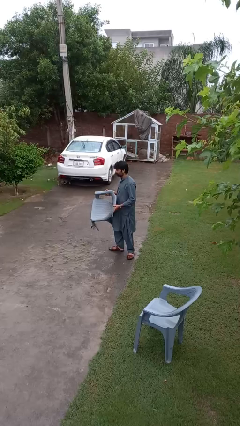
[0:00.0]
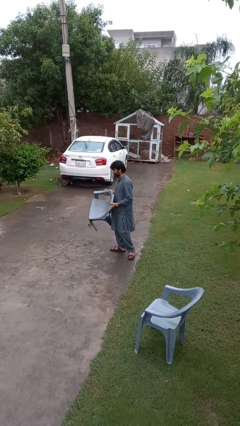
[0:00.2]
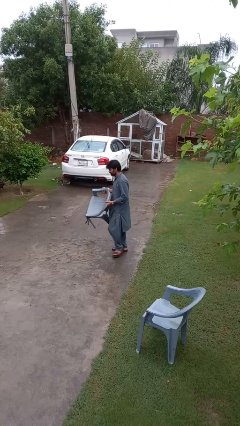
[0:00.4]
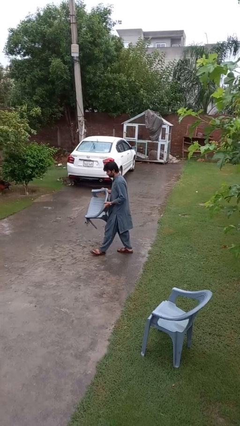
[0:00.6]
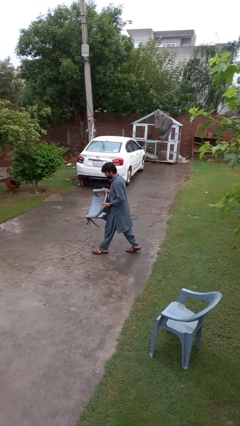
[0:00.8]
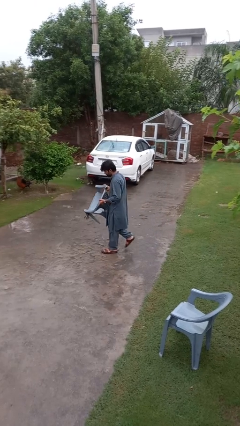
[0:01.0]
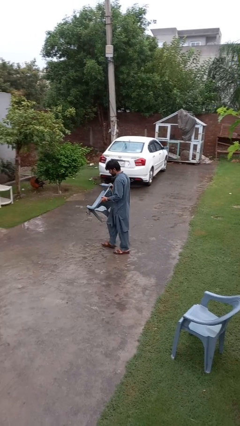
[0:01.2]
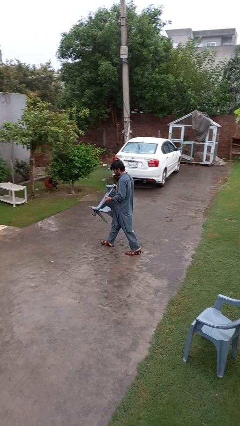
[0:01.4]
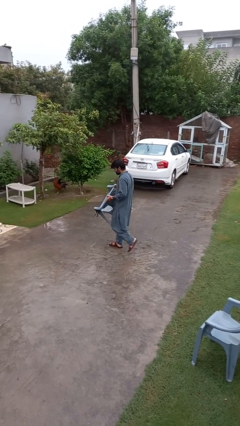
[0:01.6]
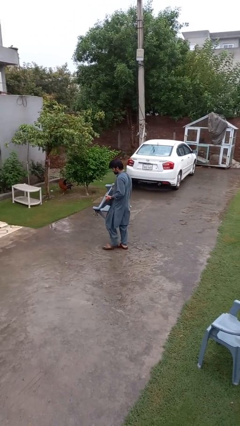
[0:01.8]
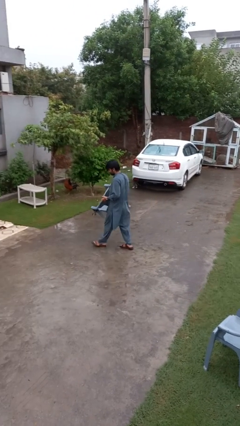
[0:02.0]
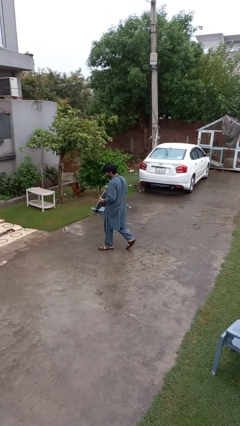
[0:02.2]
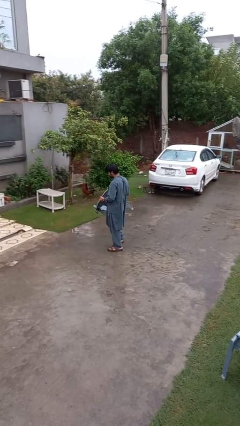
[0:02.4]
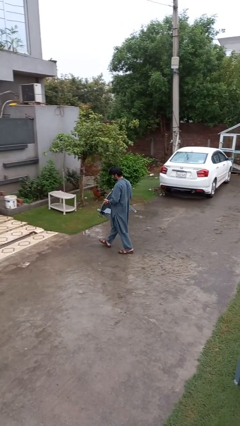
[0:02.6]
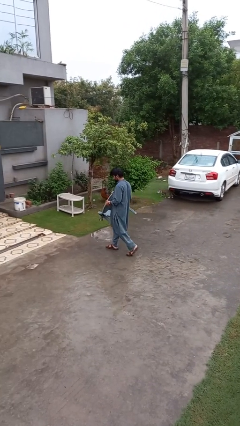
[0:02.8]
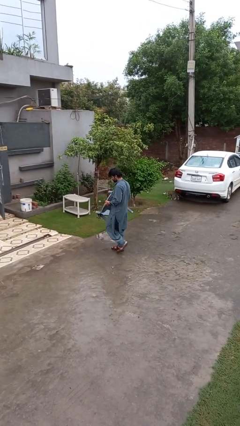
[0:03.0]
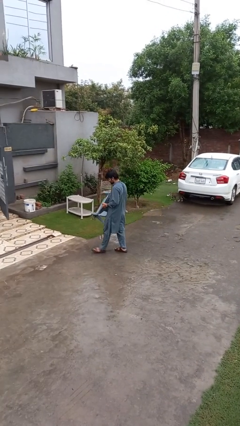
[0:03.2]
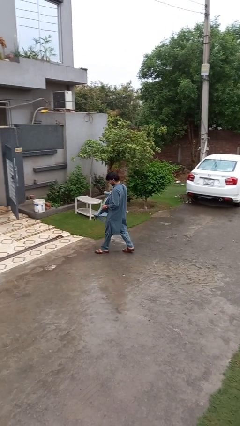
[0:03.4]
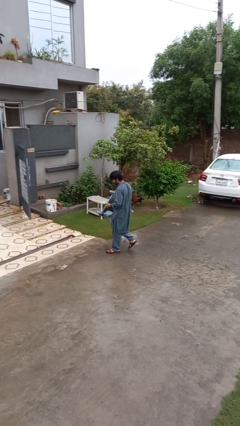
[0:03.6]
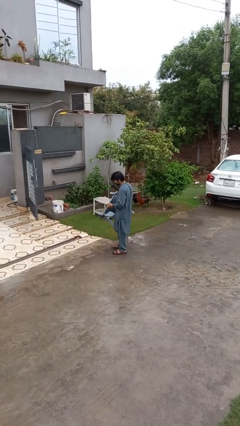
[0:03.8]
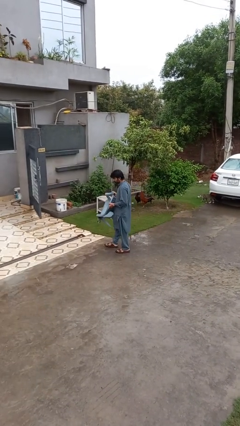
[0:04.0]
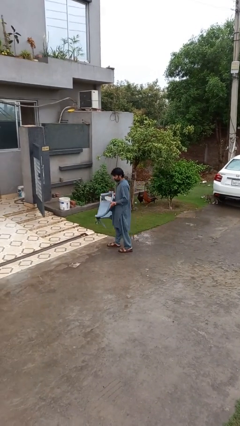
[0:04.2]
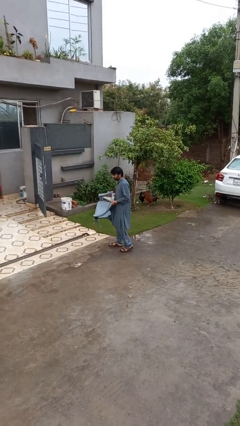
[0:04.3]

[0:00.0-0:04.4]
person carries furniture

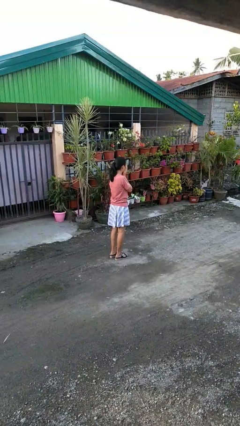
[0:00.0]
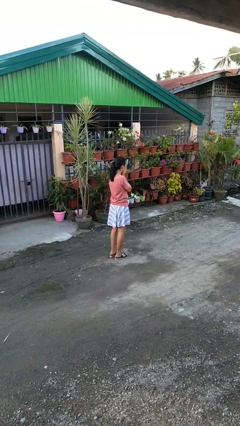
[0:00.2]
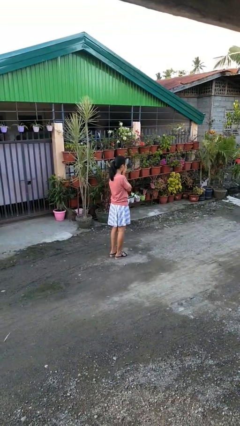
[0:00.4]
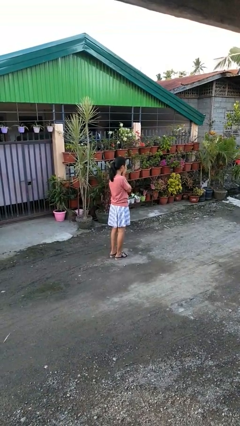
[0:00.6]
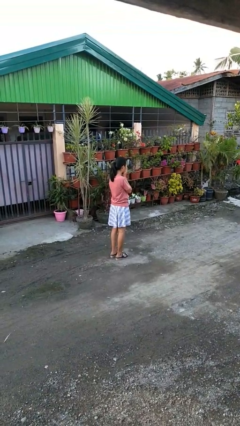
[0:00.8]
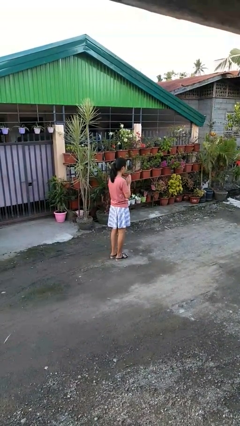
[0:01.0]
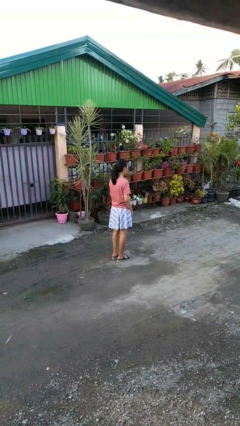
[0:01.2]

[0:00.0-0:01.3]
person blows into hands

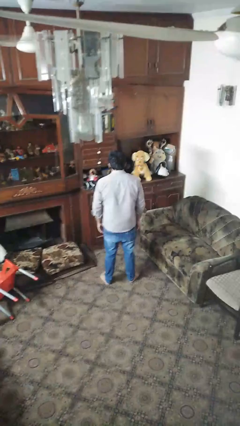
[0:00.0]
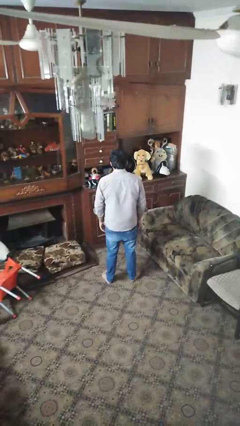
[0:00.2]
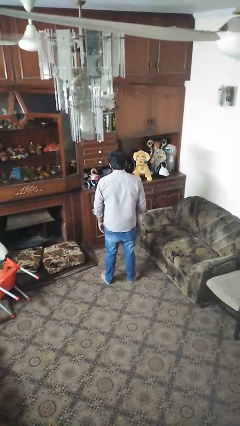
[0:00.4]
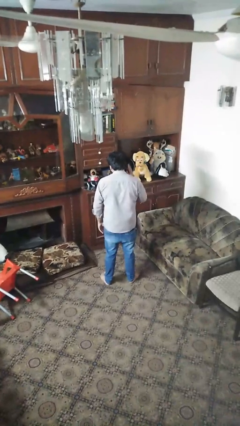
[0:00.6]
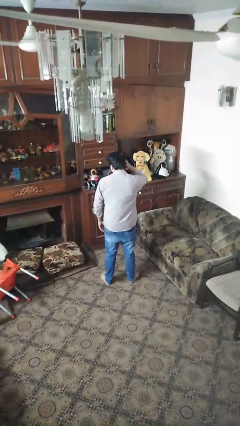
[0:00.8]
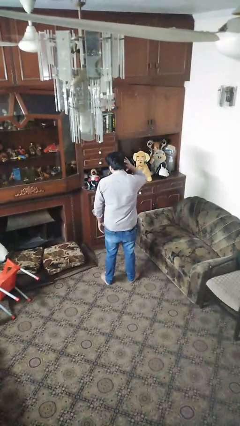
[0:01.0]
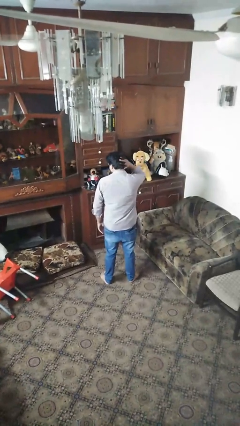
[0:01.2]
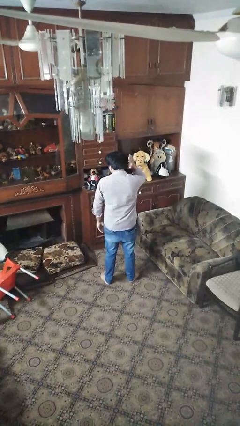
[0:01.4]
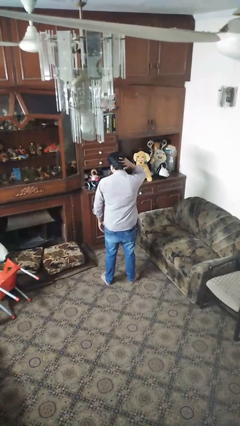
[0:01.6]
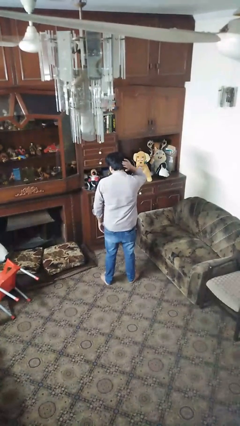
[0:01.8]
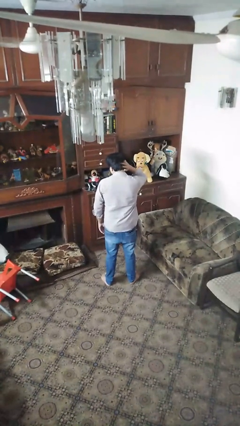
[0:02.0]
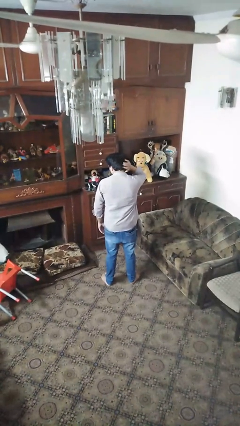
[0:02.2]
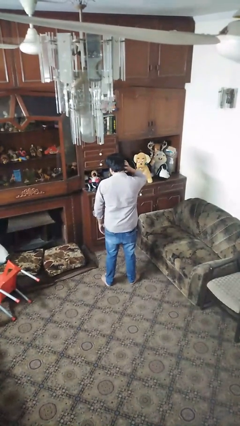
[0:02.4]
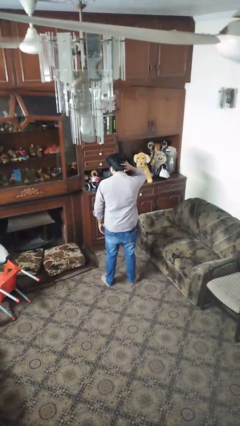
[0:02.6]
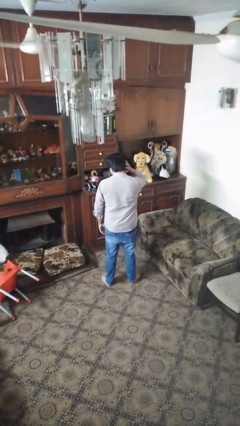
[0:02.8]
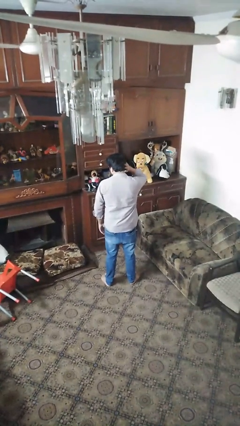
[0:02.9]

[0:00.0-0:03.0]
person strokes hair

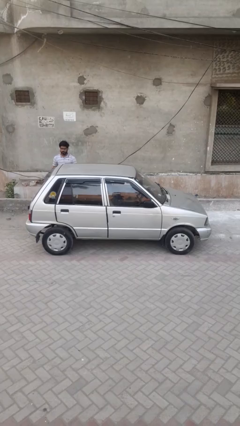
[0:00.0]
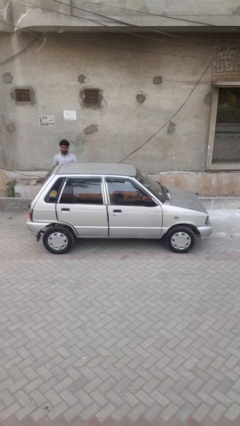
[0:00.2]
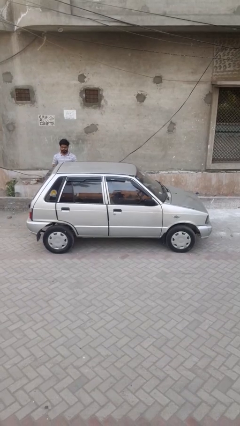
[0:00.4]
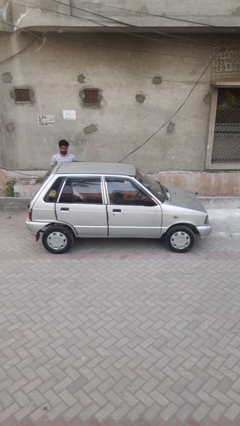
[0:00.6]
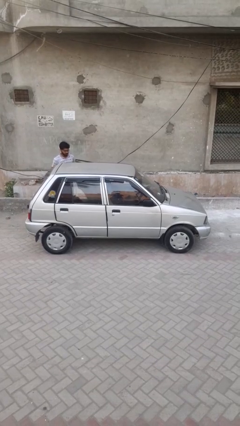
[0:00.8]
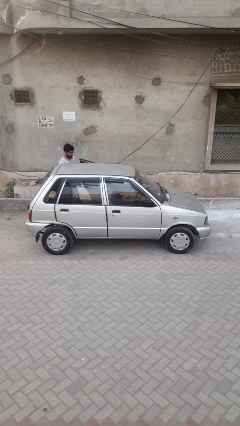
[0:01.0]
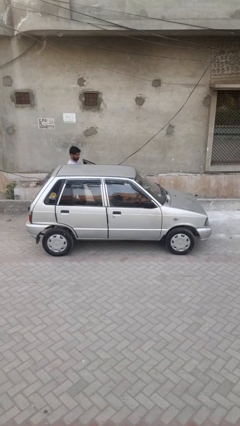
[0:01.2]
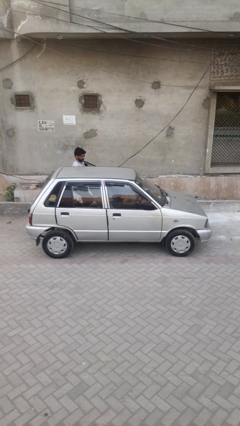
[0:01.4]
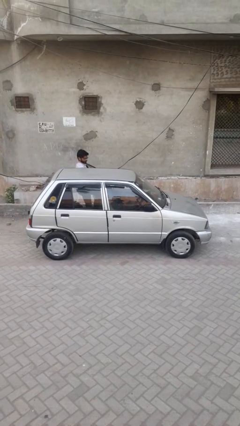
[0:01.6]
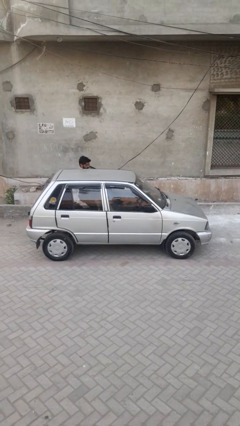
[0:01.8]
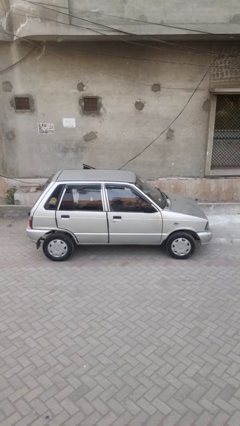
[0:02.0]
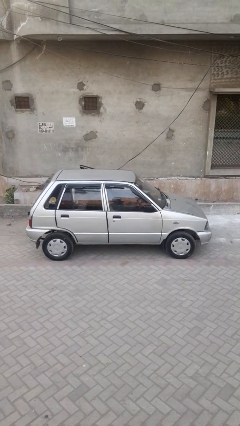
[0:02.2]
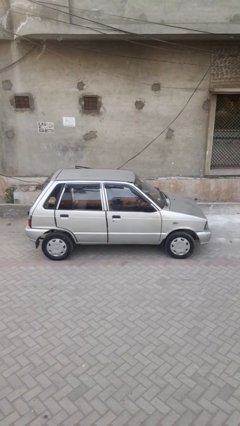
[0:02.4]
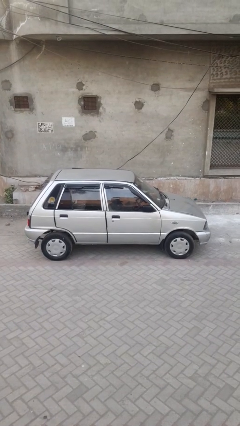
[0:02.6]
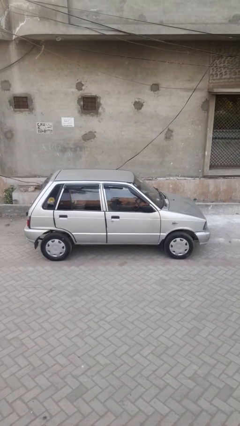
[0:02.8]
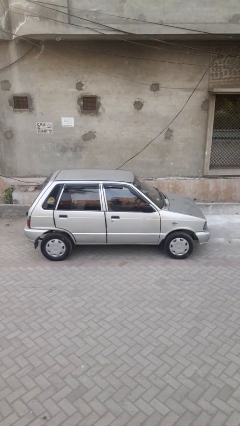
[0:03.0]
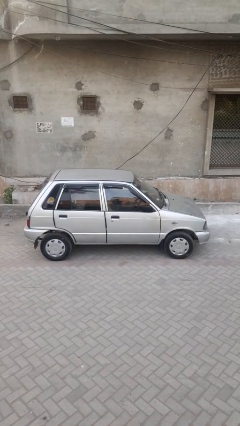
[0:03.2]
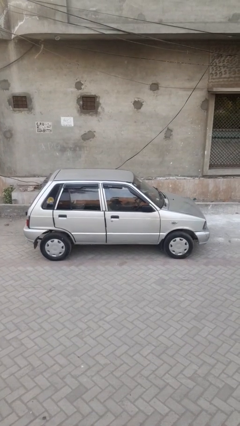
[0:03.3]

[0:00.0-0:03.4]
car picks up person

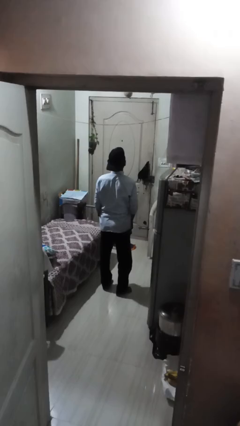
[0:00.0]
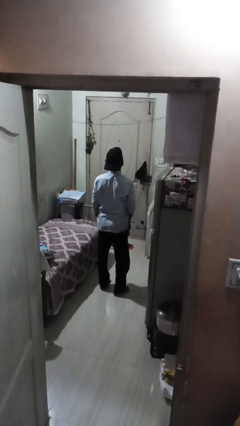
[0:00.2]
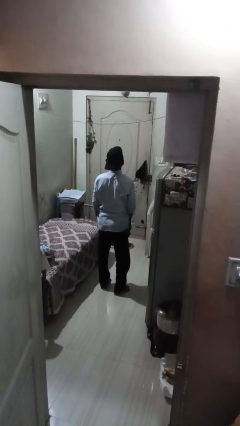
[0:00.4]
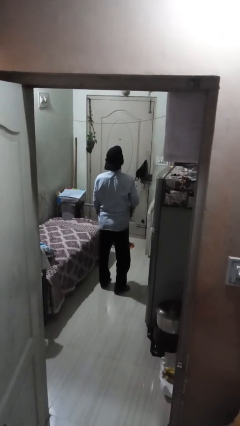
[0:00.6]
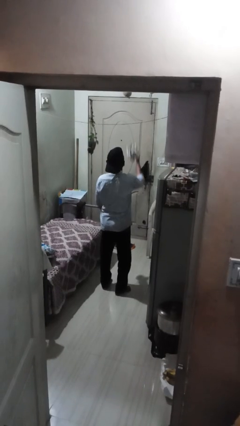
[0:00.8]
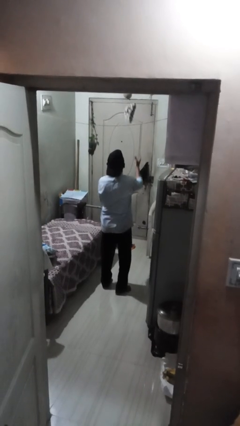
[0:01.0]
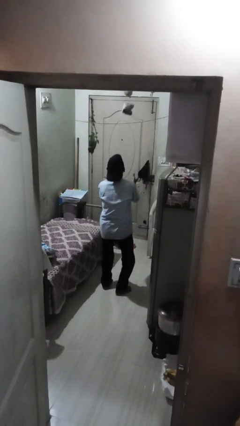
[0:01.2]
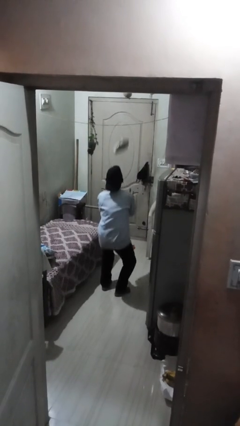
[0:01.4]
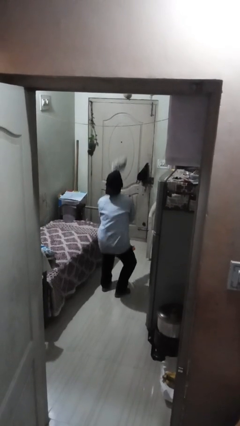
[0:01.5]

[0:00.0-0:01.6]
person drops object

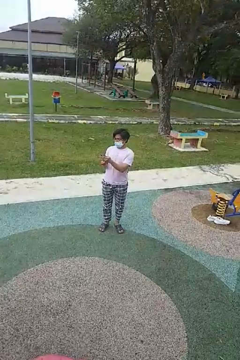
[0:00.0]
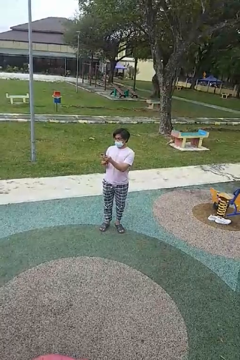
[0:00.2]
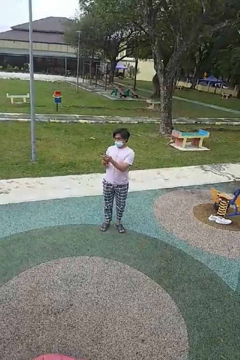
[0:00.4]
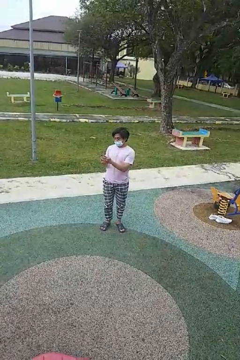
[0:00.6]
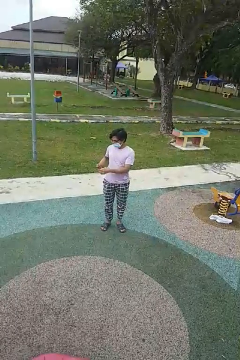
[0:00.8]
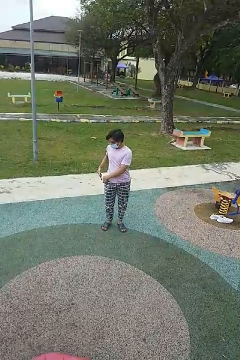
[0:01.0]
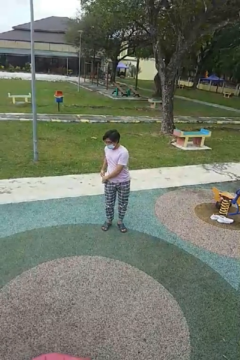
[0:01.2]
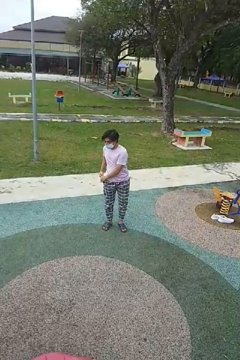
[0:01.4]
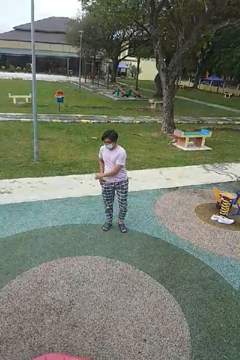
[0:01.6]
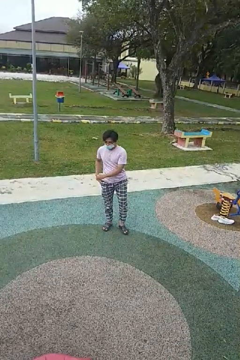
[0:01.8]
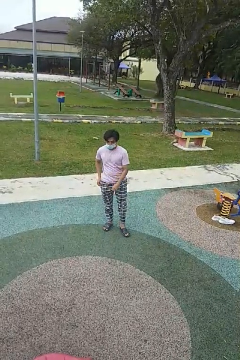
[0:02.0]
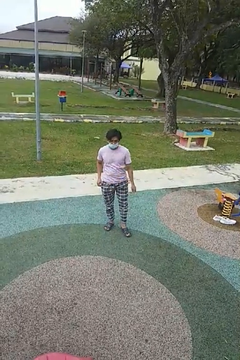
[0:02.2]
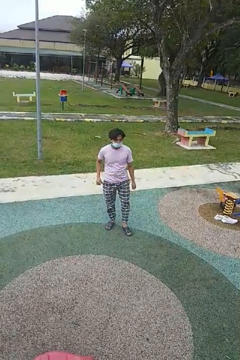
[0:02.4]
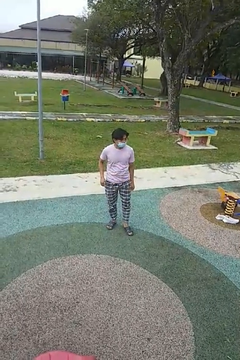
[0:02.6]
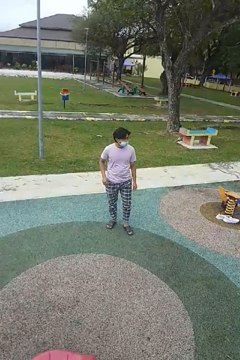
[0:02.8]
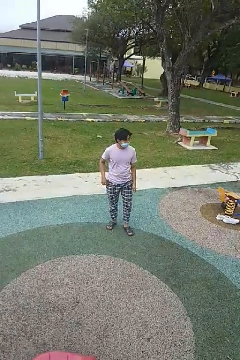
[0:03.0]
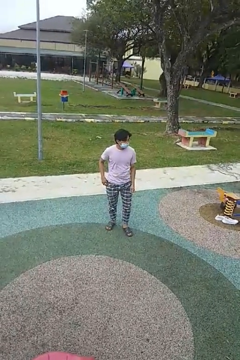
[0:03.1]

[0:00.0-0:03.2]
person puts phone into pocket

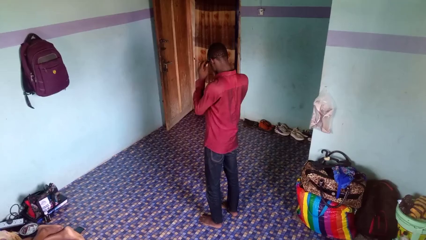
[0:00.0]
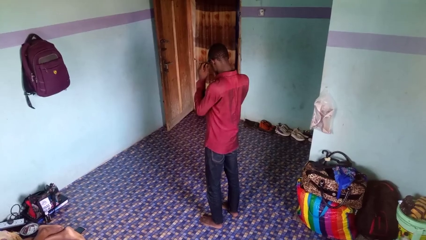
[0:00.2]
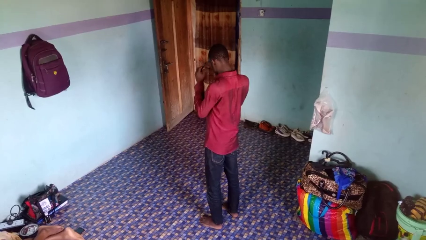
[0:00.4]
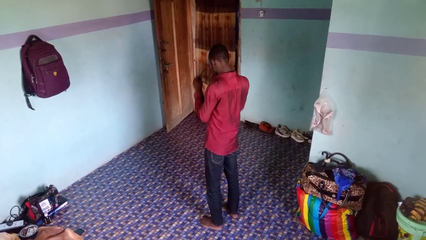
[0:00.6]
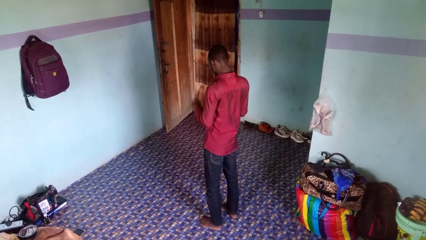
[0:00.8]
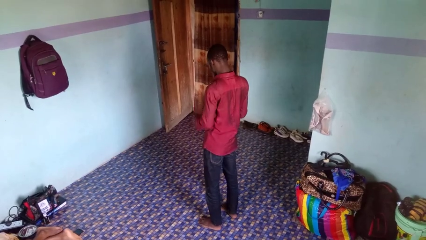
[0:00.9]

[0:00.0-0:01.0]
person takes off glasses
